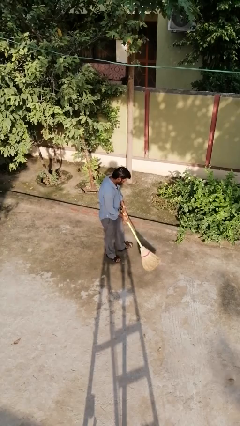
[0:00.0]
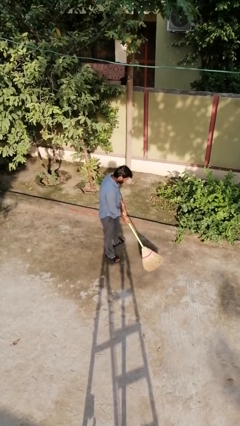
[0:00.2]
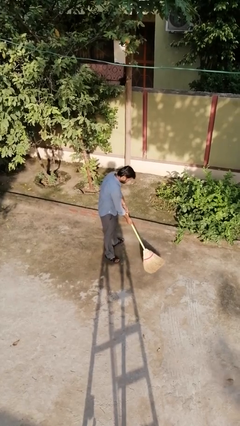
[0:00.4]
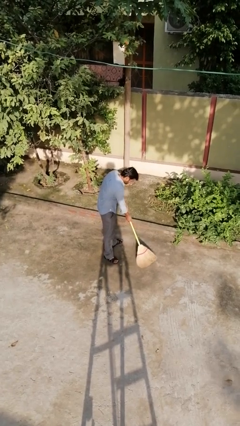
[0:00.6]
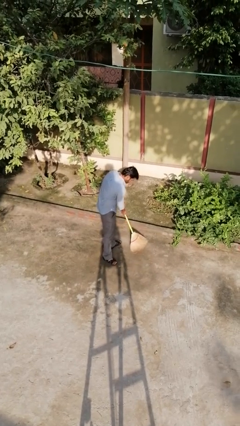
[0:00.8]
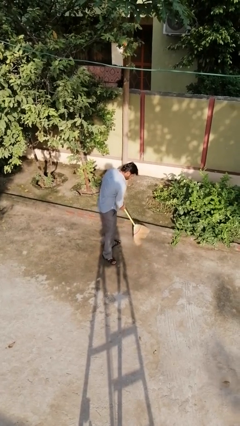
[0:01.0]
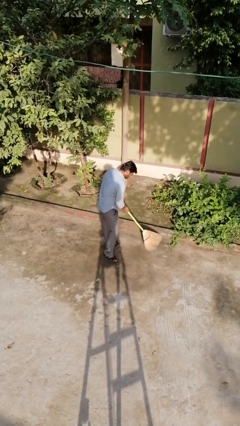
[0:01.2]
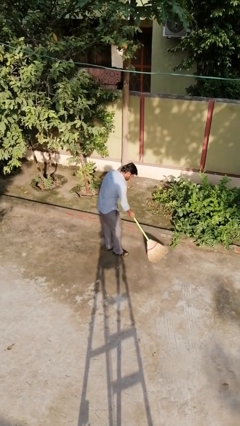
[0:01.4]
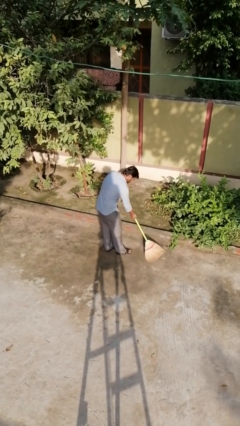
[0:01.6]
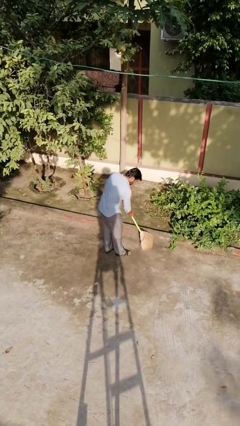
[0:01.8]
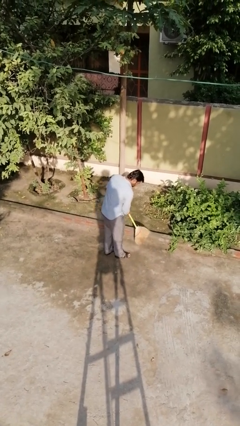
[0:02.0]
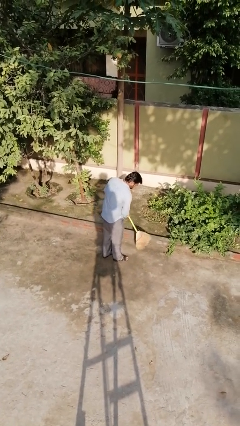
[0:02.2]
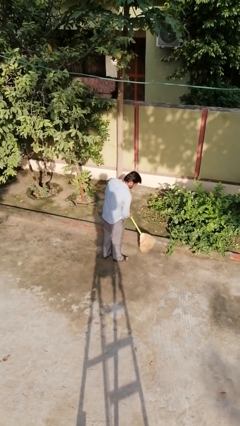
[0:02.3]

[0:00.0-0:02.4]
person sweeps floor

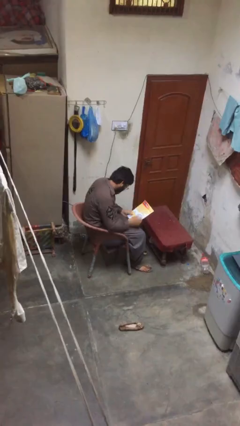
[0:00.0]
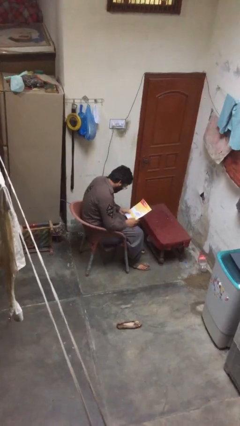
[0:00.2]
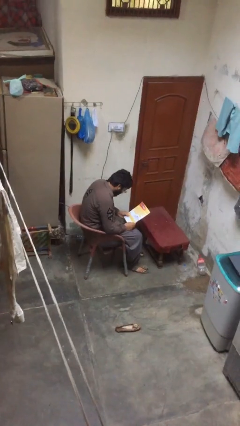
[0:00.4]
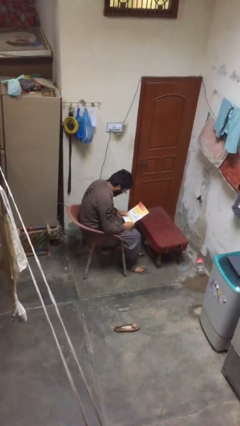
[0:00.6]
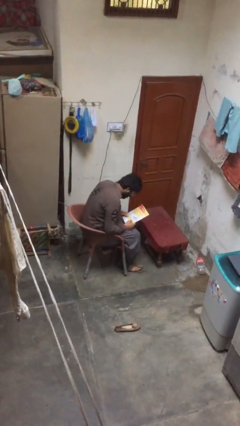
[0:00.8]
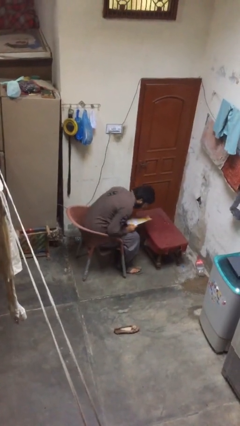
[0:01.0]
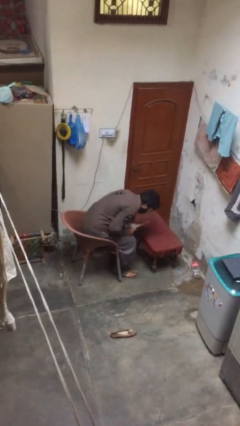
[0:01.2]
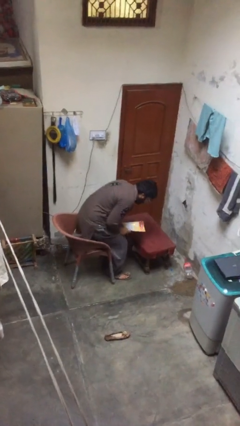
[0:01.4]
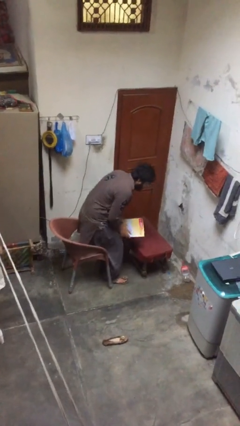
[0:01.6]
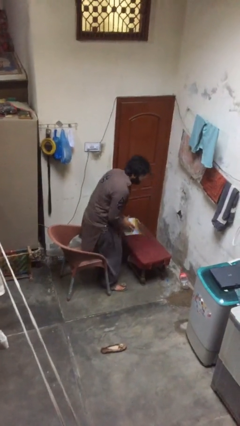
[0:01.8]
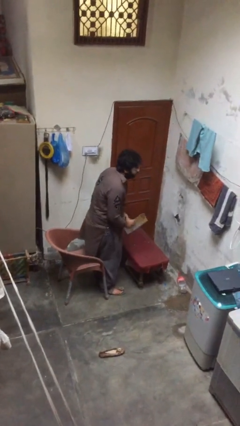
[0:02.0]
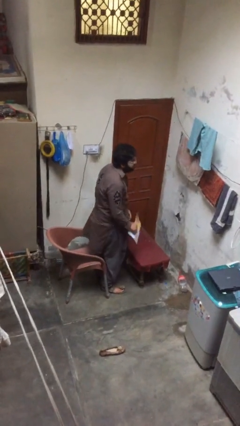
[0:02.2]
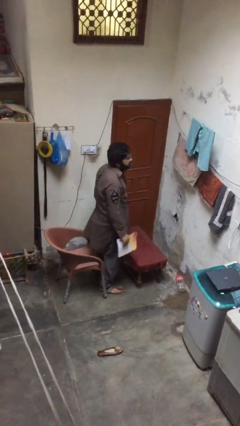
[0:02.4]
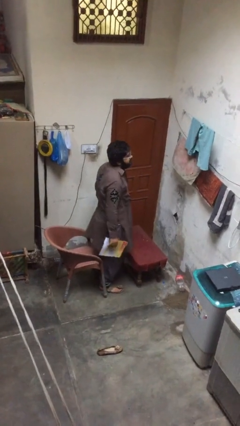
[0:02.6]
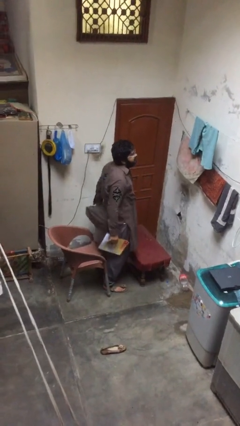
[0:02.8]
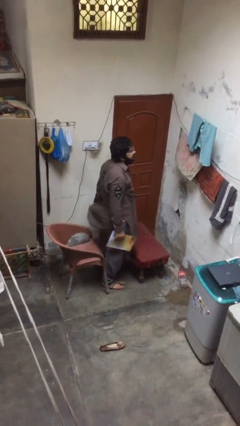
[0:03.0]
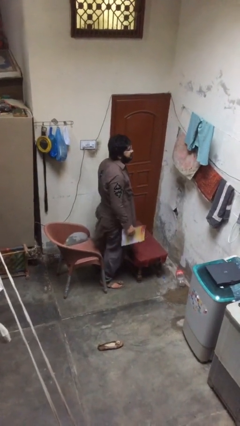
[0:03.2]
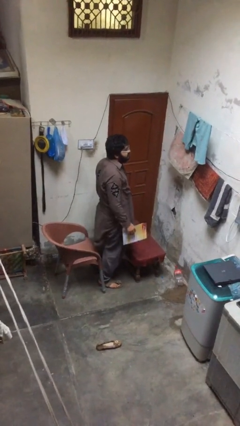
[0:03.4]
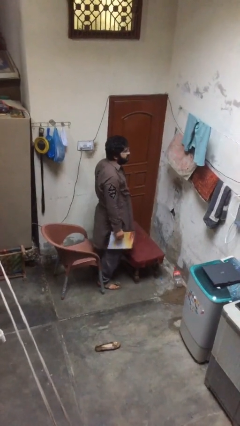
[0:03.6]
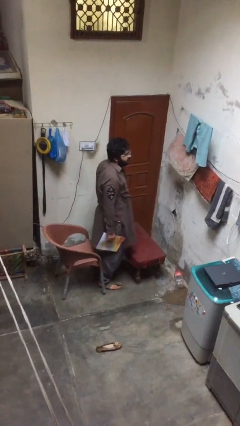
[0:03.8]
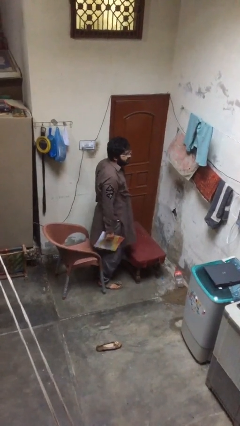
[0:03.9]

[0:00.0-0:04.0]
person stands up

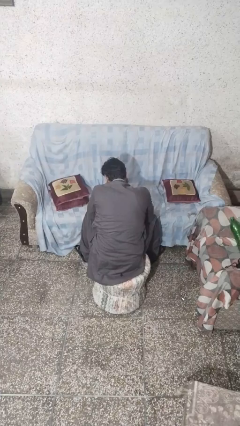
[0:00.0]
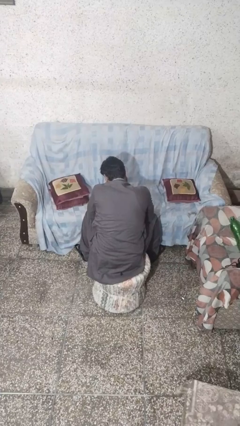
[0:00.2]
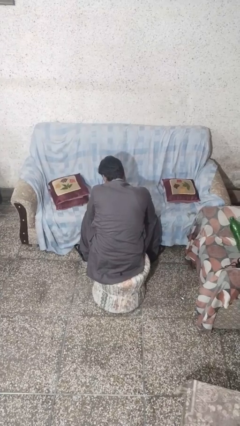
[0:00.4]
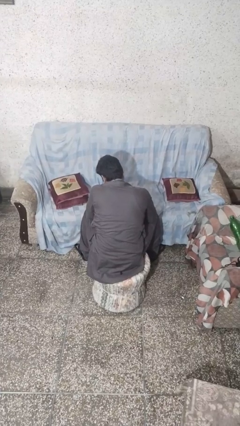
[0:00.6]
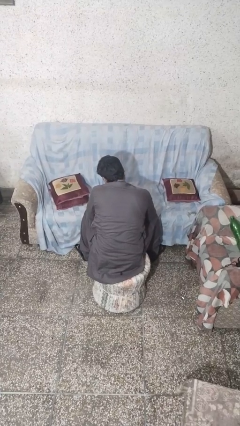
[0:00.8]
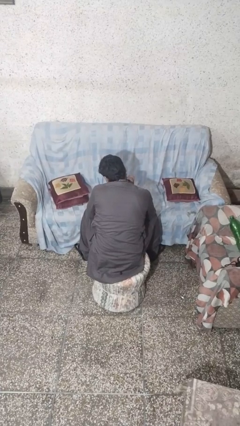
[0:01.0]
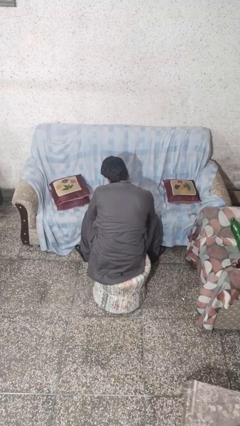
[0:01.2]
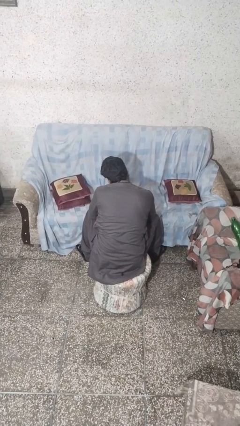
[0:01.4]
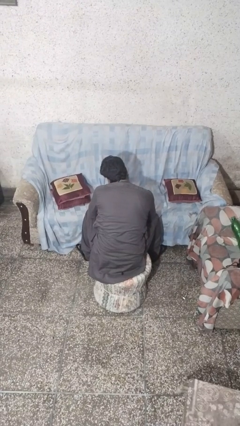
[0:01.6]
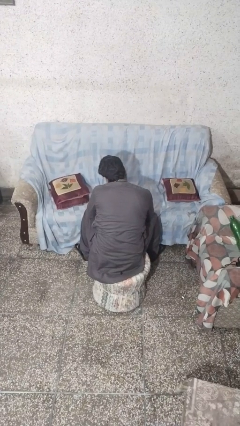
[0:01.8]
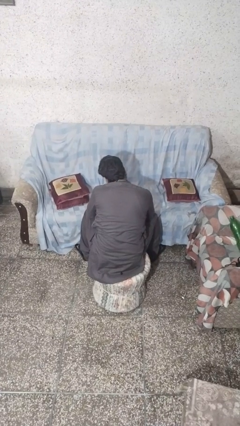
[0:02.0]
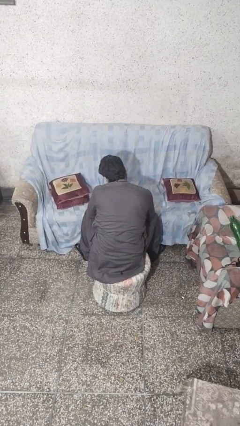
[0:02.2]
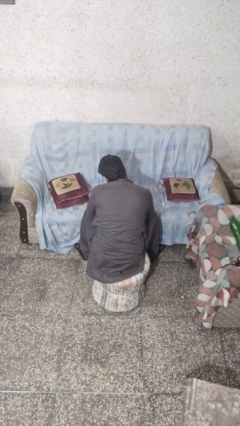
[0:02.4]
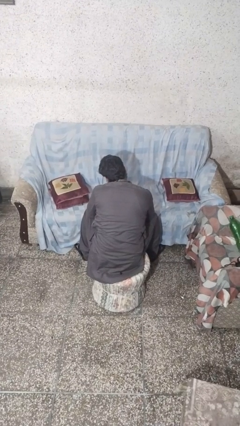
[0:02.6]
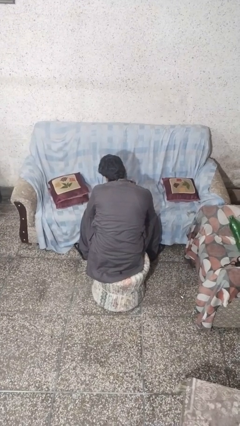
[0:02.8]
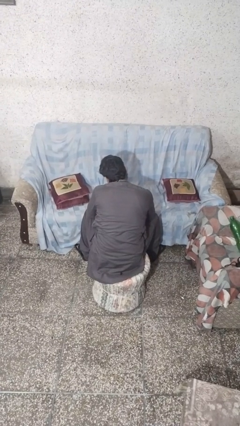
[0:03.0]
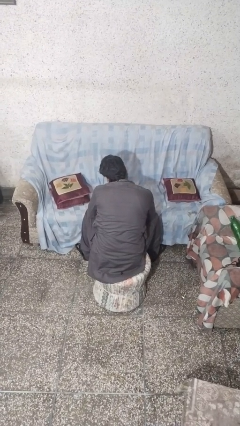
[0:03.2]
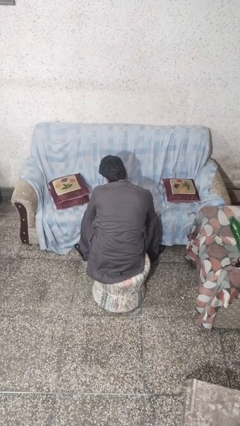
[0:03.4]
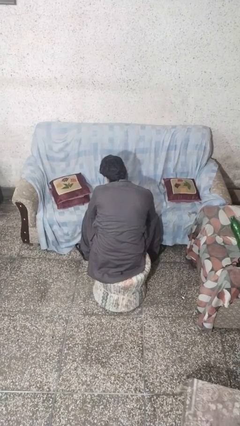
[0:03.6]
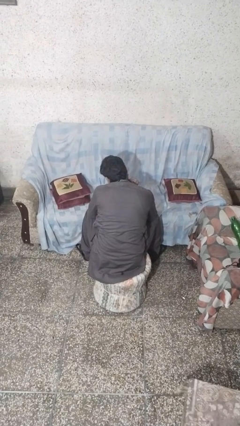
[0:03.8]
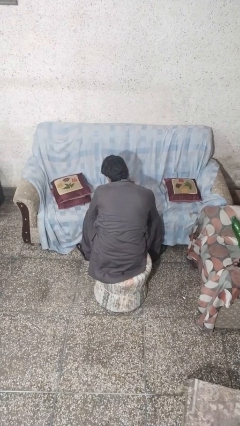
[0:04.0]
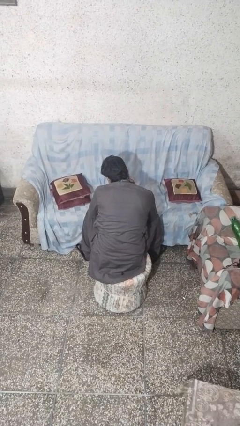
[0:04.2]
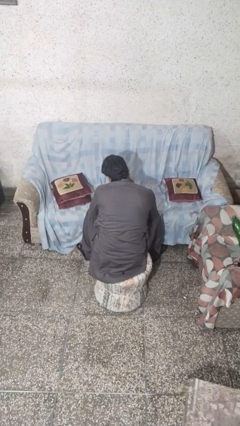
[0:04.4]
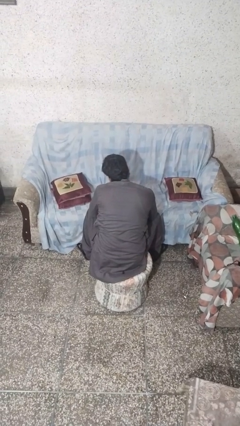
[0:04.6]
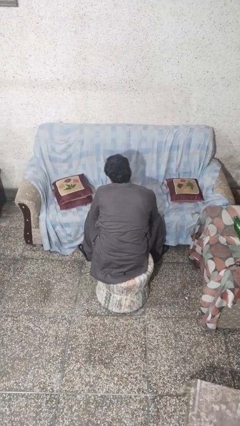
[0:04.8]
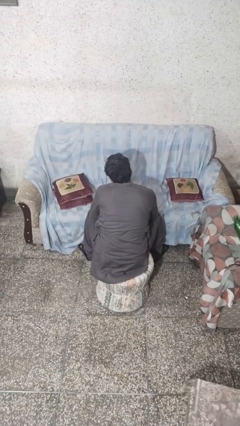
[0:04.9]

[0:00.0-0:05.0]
person strokes chin

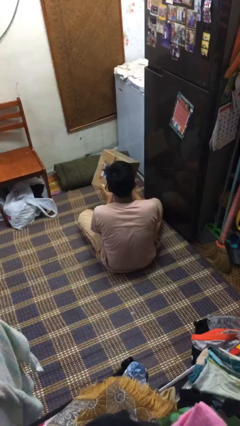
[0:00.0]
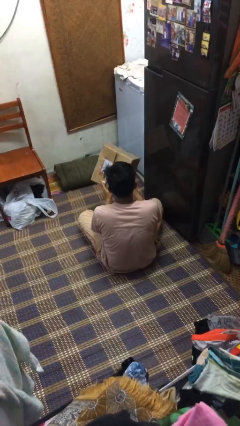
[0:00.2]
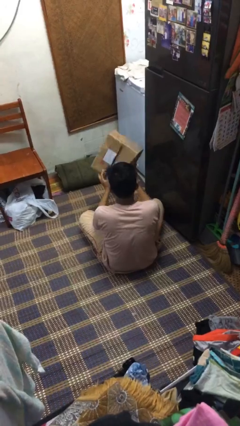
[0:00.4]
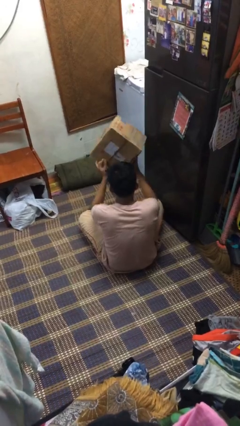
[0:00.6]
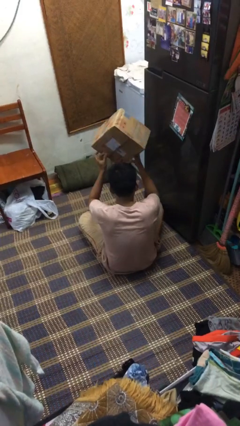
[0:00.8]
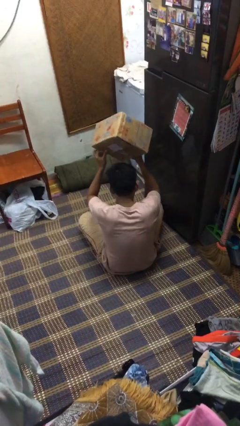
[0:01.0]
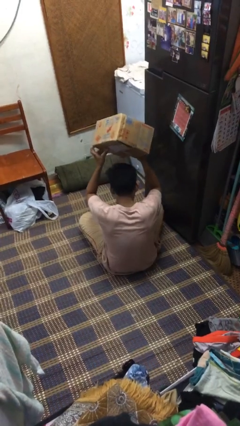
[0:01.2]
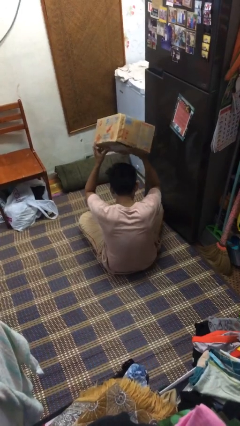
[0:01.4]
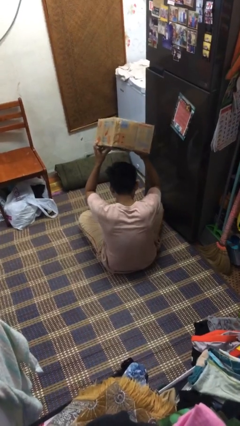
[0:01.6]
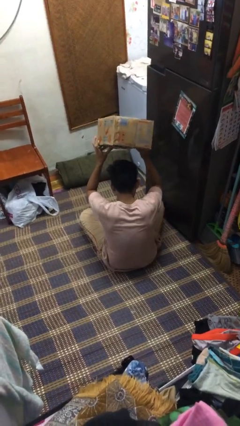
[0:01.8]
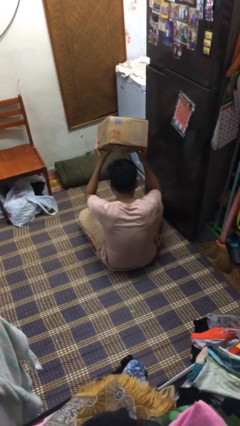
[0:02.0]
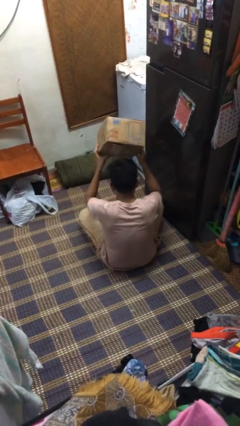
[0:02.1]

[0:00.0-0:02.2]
person holds object above head

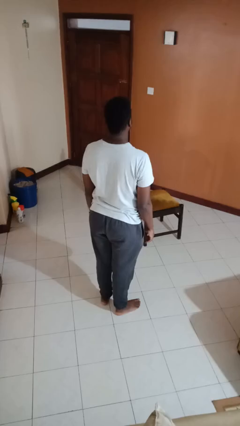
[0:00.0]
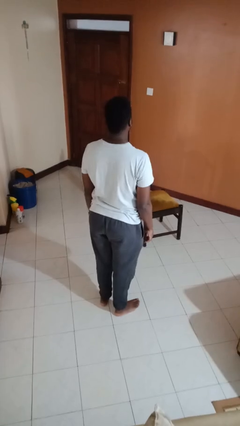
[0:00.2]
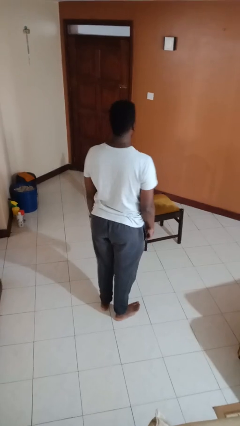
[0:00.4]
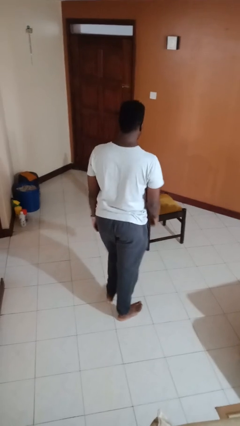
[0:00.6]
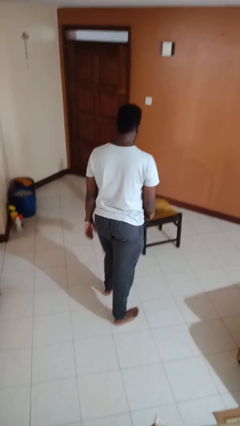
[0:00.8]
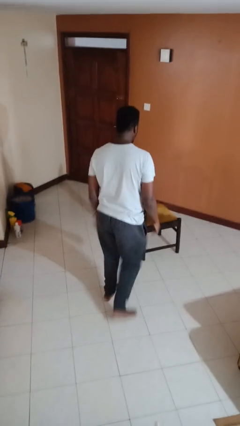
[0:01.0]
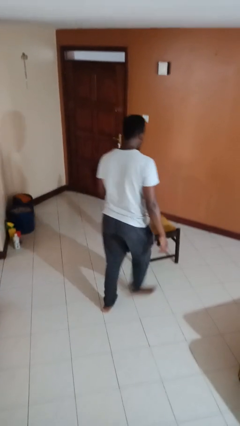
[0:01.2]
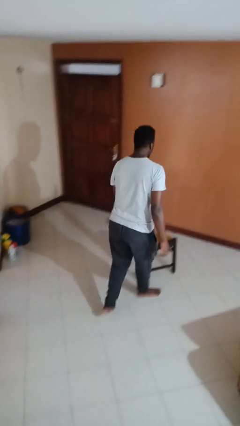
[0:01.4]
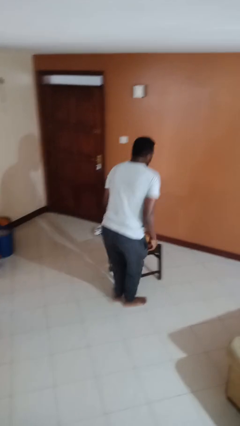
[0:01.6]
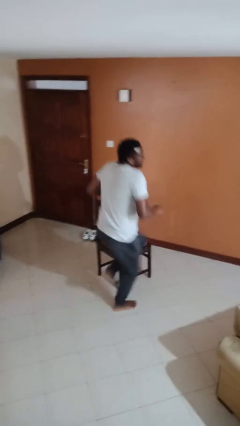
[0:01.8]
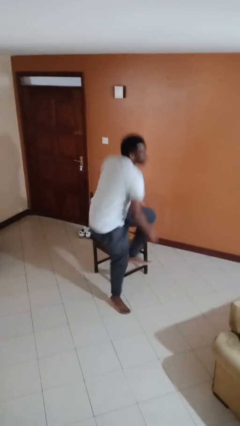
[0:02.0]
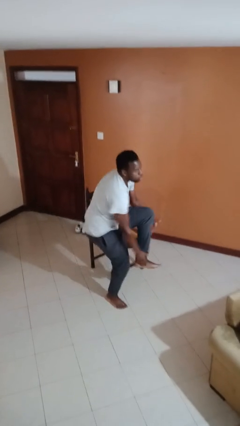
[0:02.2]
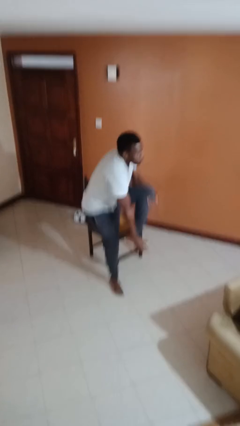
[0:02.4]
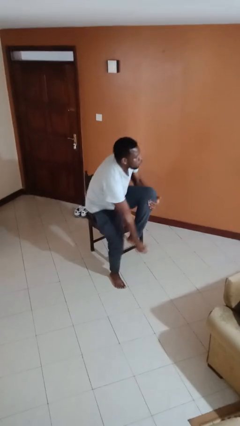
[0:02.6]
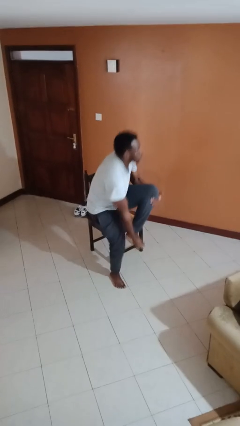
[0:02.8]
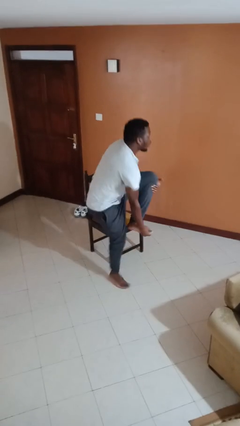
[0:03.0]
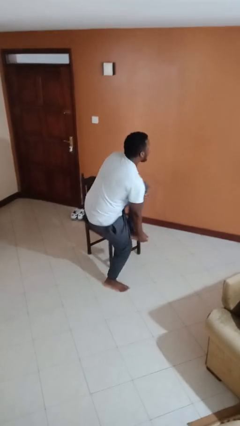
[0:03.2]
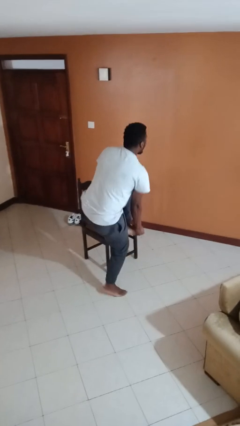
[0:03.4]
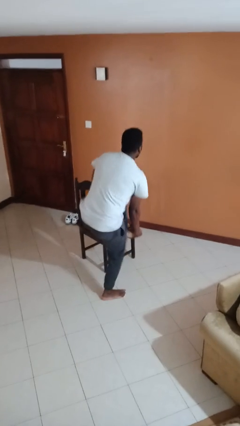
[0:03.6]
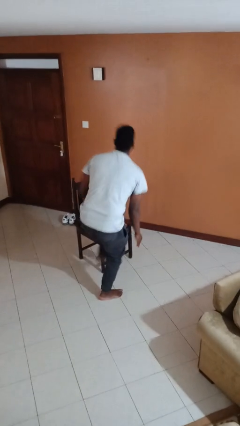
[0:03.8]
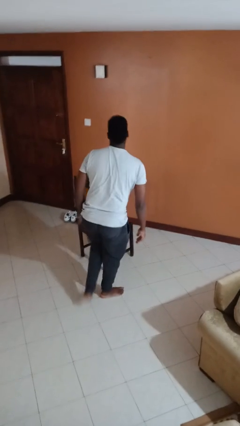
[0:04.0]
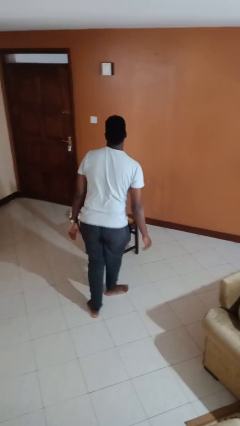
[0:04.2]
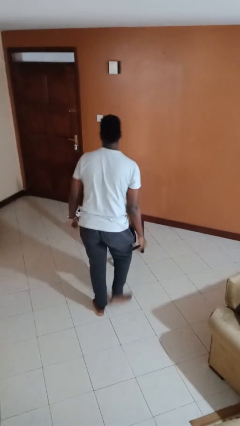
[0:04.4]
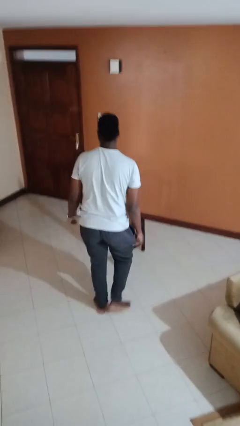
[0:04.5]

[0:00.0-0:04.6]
person stubs toe
